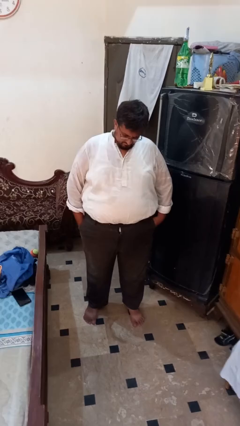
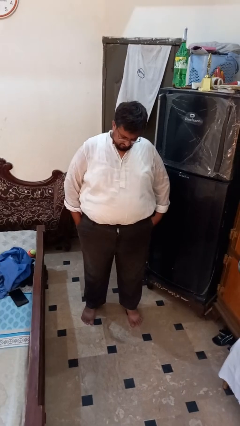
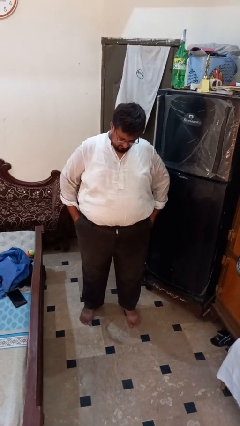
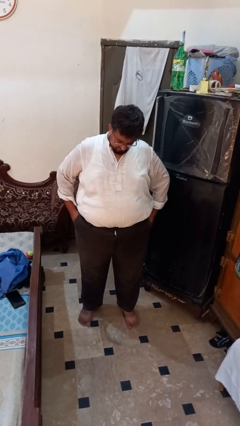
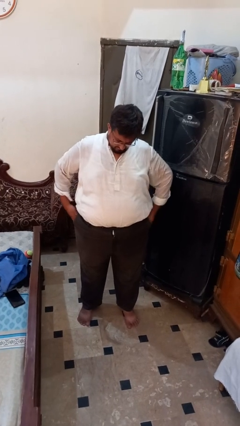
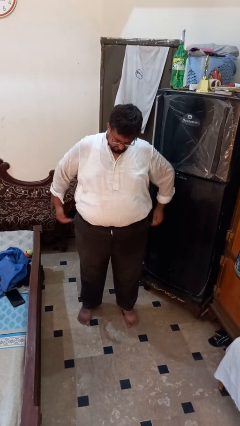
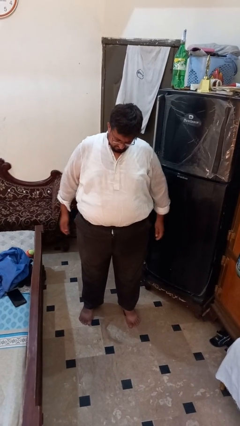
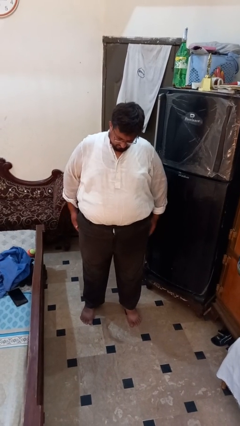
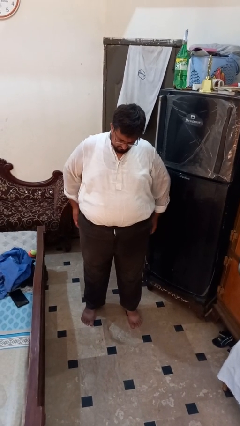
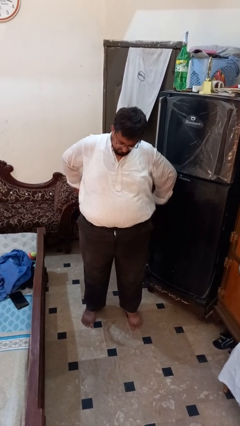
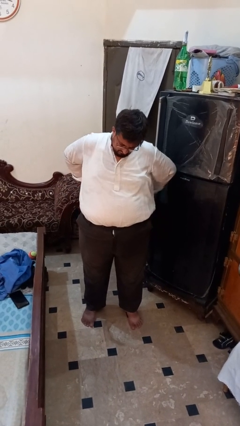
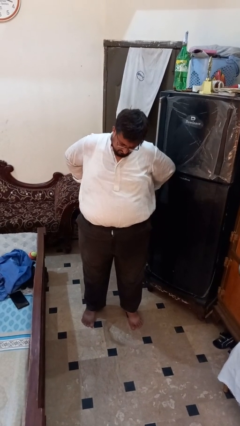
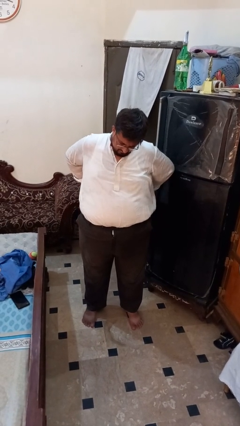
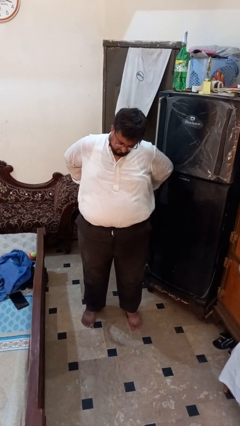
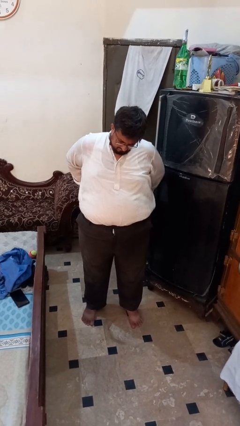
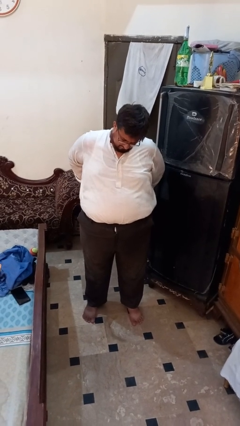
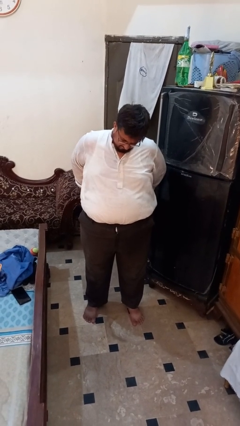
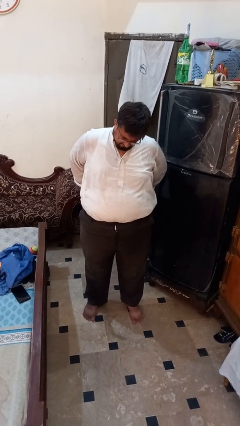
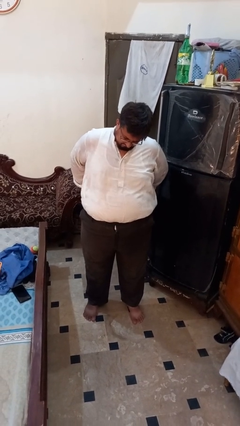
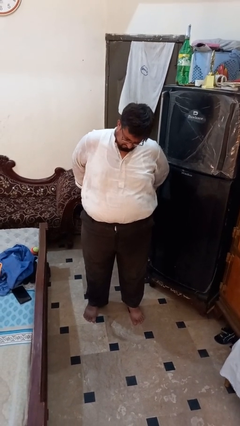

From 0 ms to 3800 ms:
person puts hands in back pockets

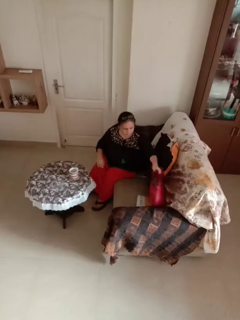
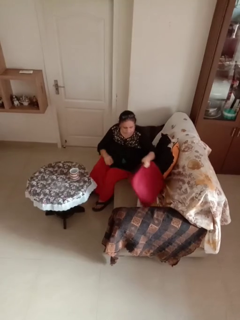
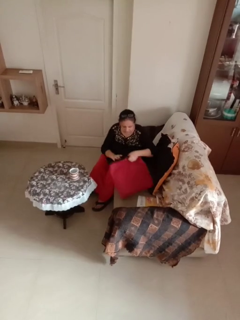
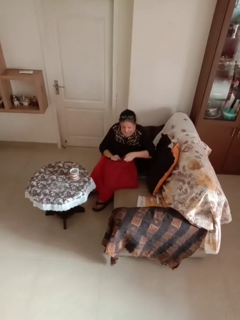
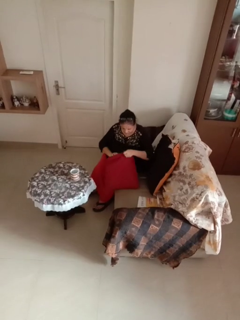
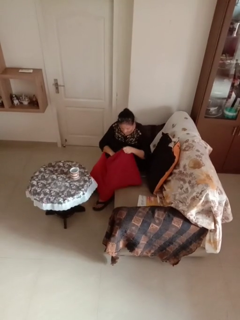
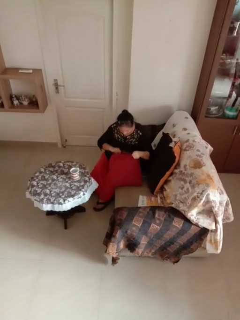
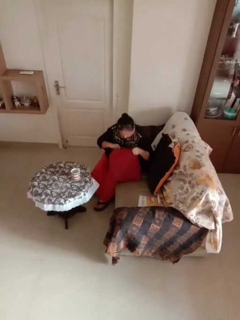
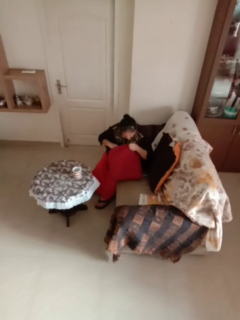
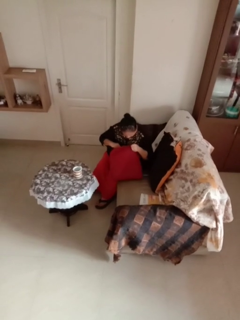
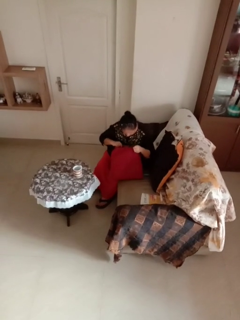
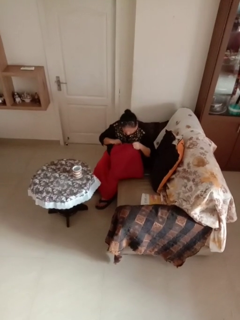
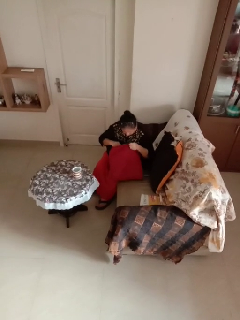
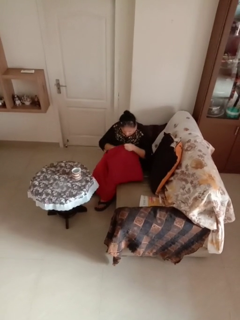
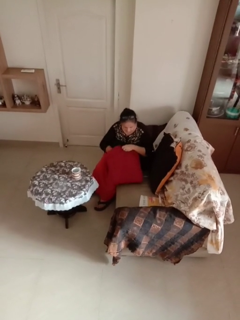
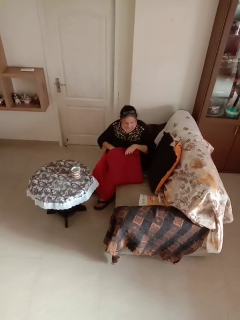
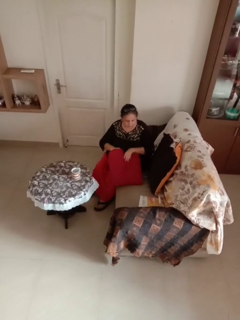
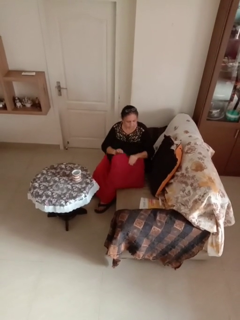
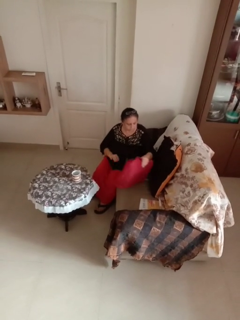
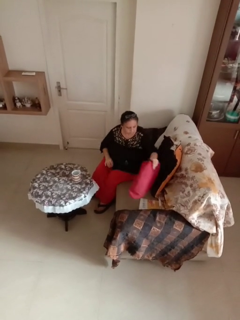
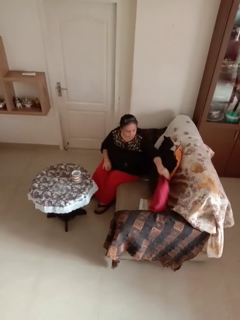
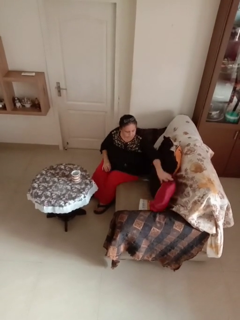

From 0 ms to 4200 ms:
person searches in couch

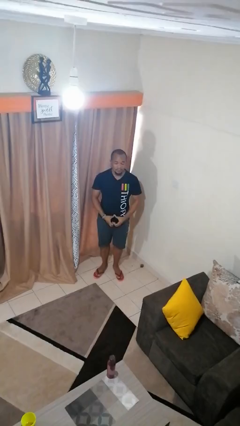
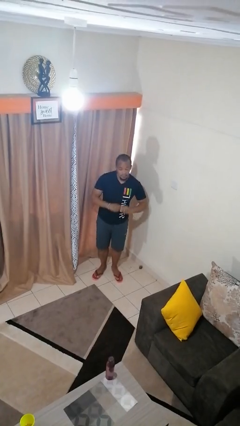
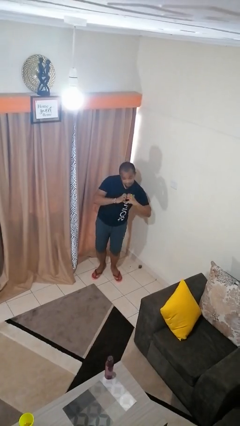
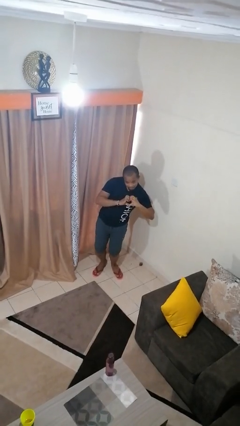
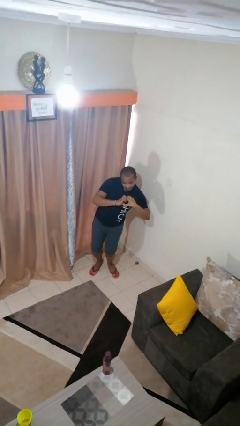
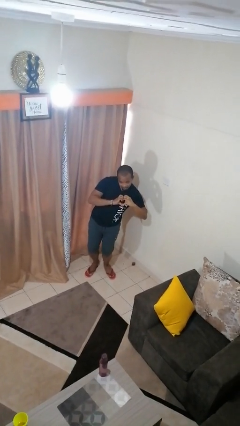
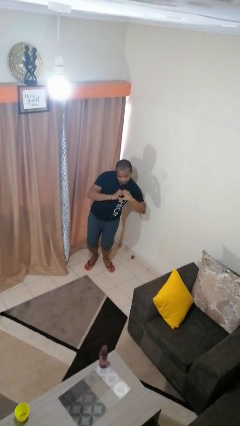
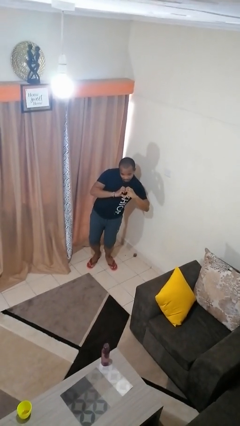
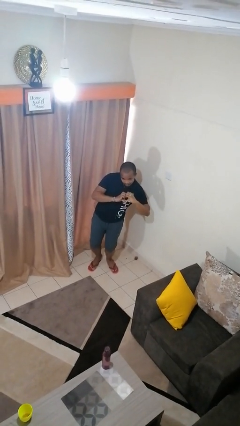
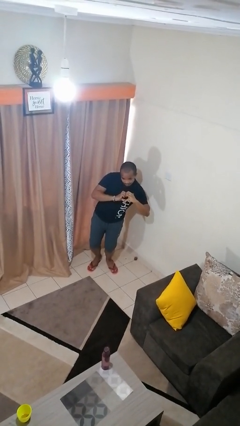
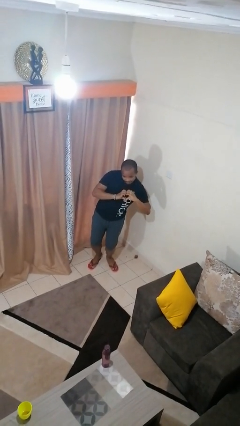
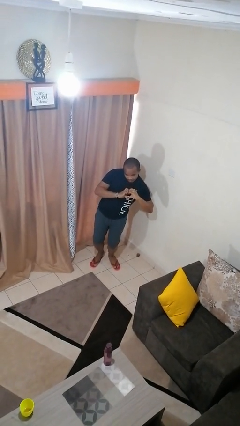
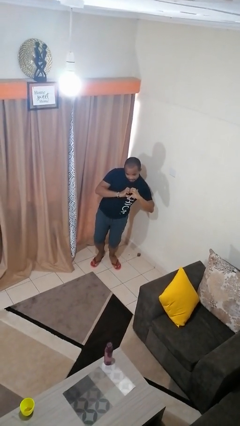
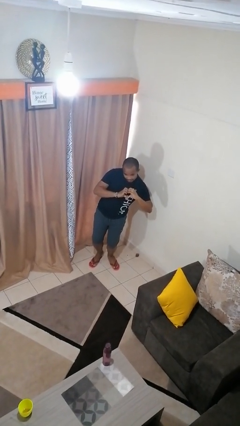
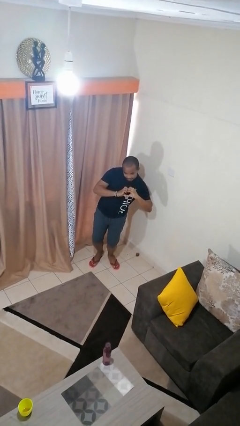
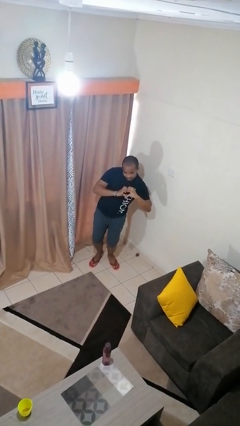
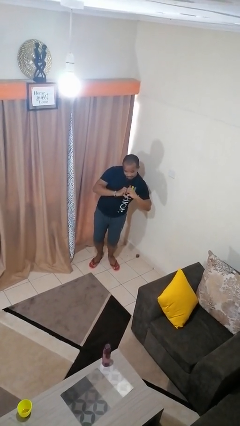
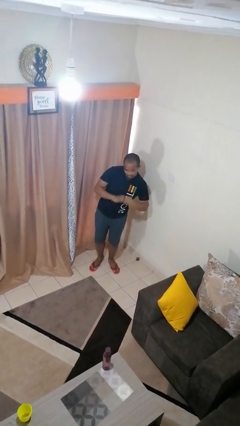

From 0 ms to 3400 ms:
person gestures heart

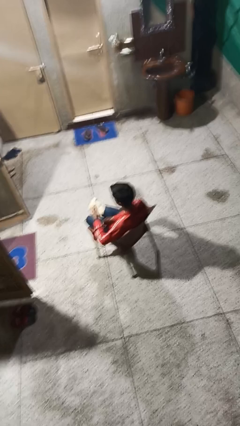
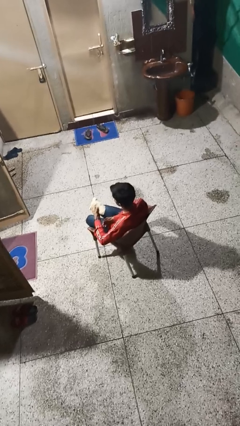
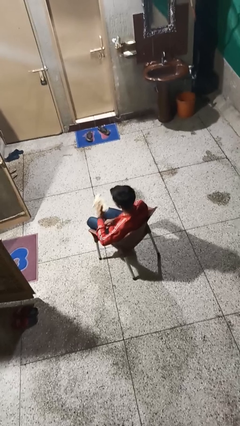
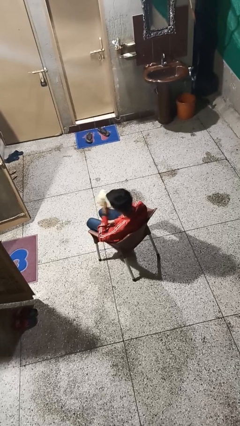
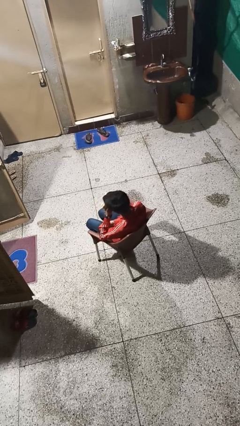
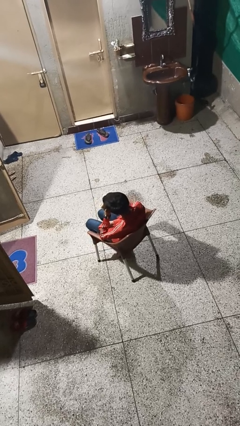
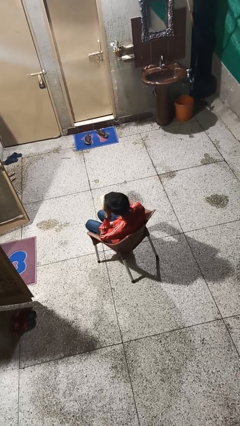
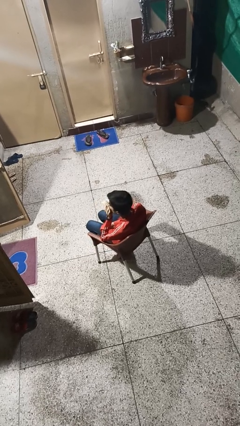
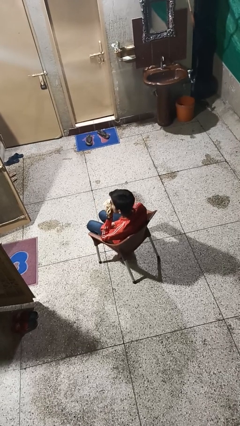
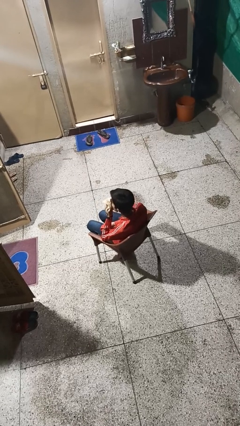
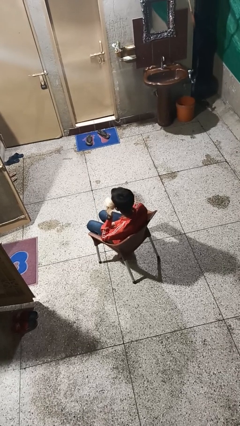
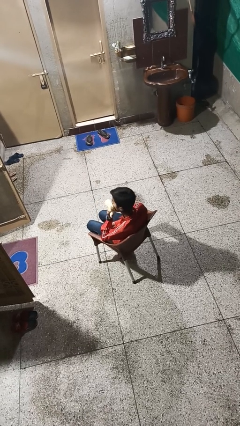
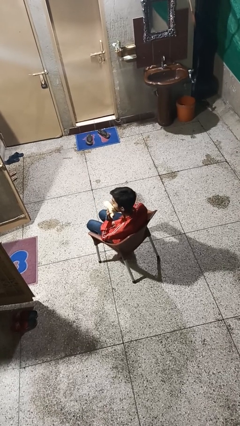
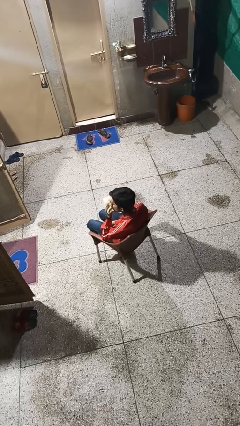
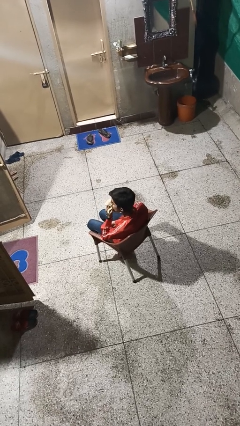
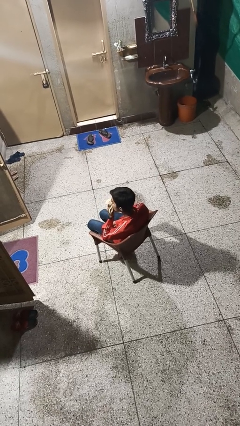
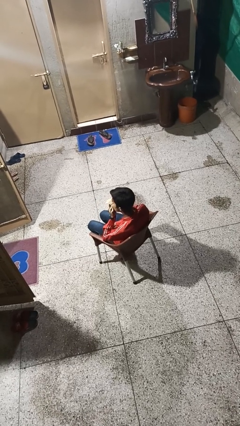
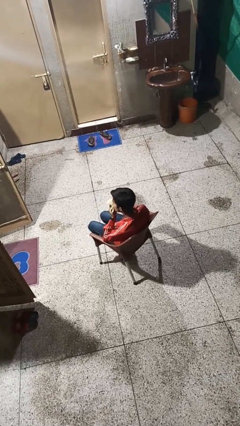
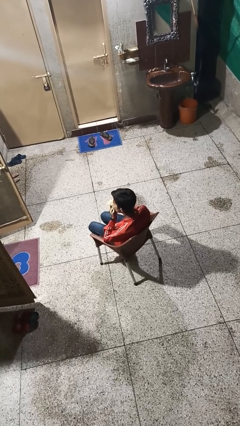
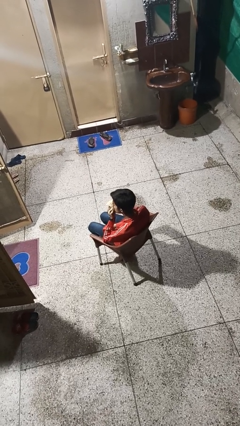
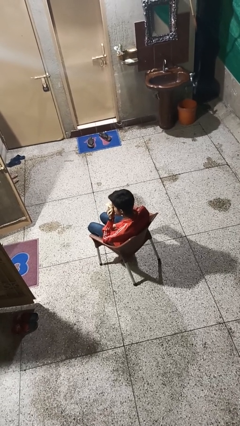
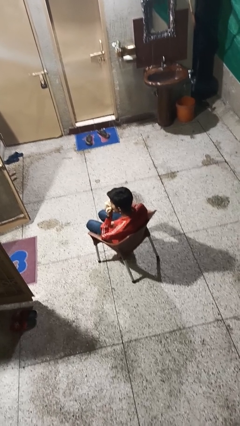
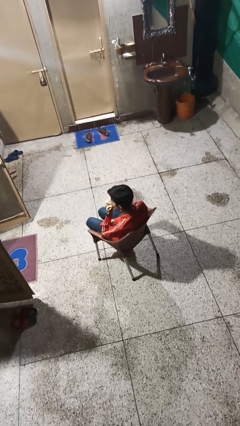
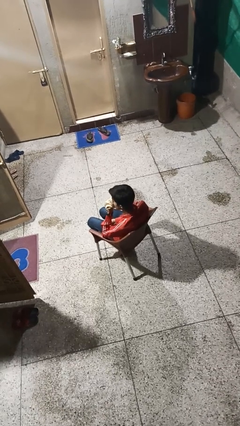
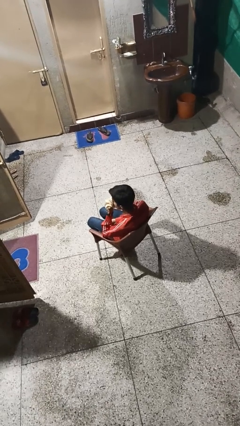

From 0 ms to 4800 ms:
person blows nose

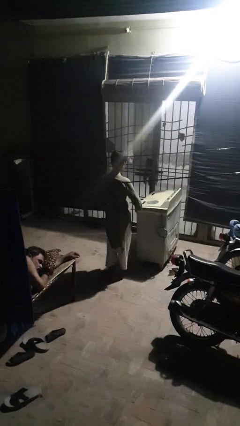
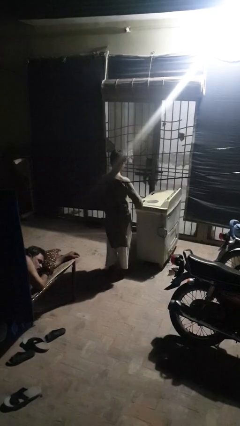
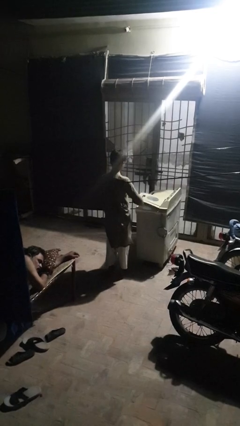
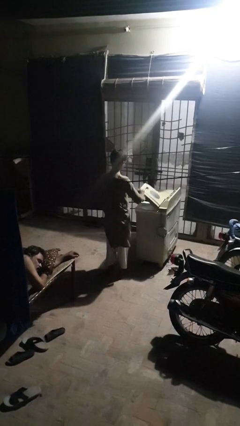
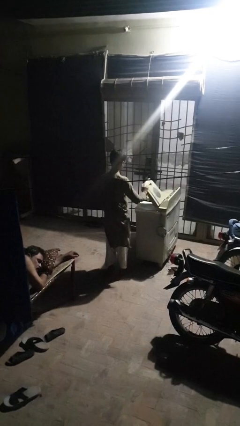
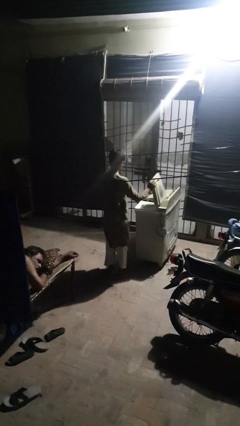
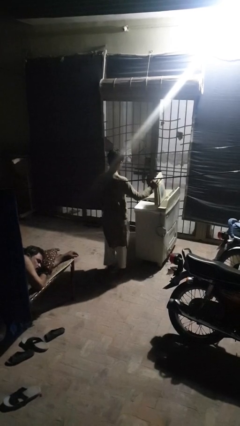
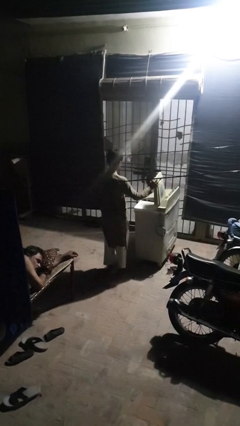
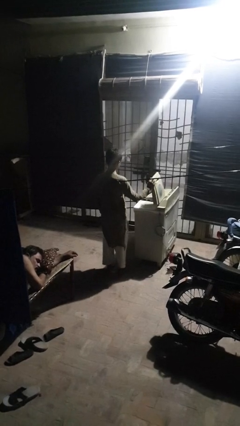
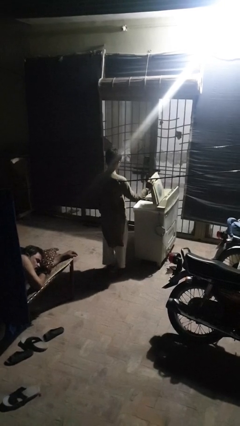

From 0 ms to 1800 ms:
person opens clothes washer

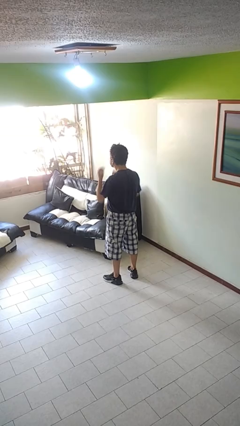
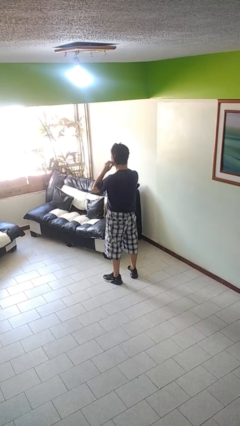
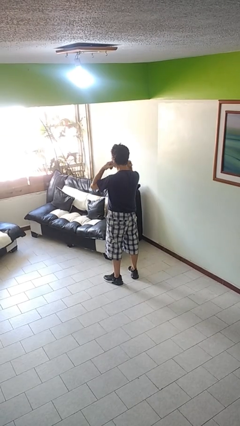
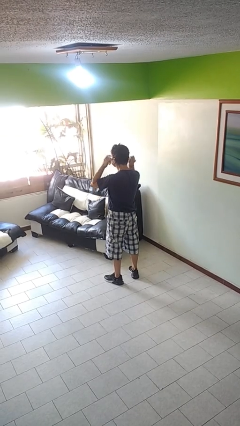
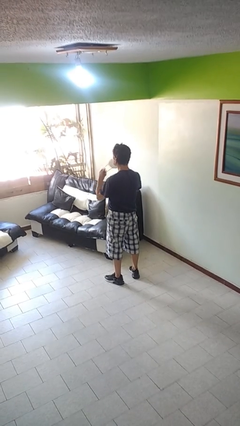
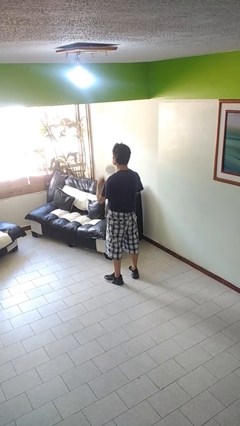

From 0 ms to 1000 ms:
person takes off facemask
